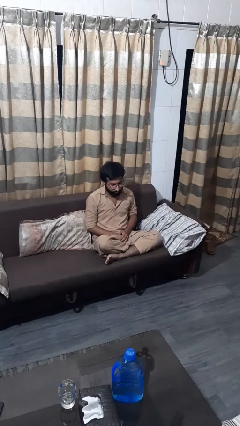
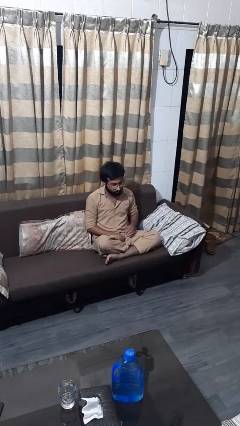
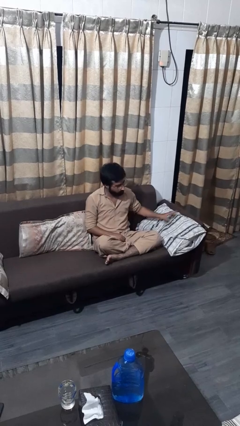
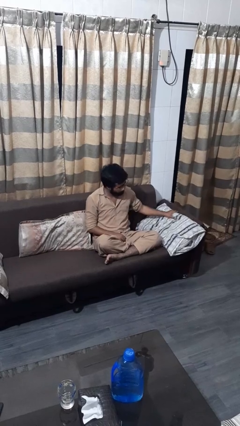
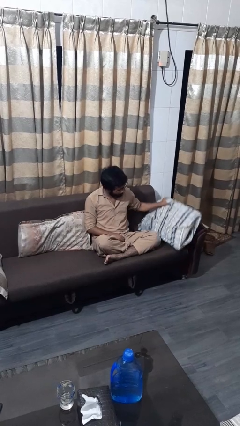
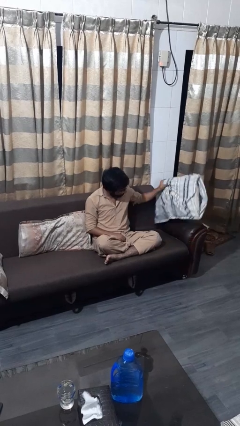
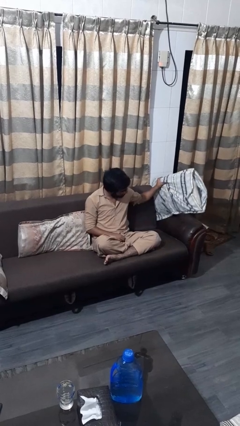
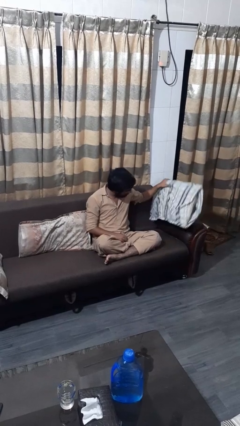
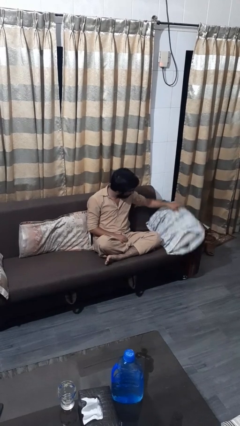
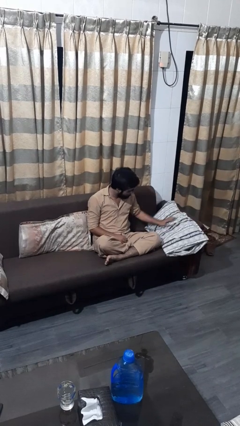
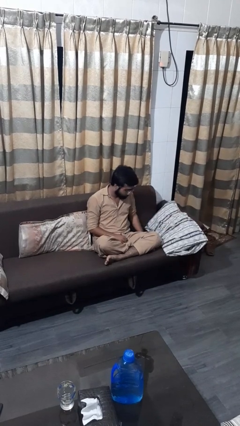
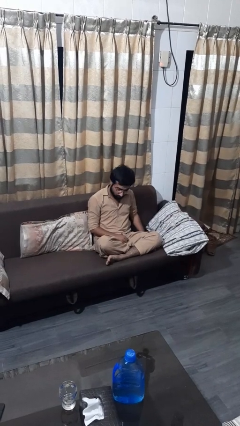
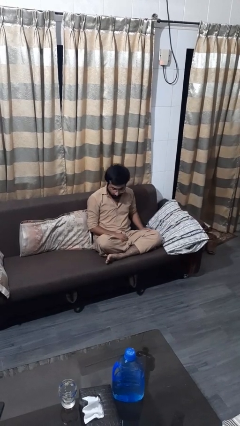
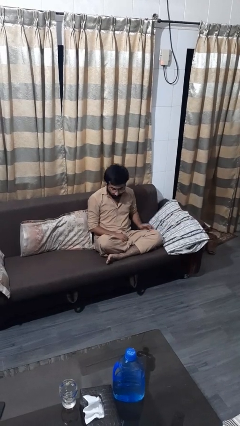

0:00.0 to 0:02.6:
person searches in couch

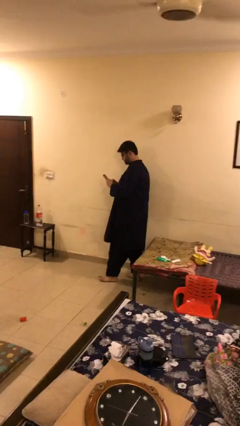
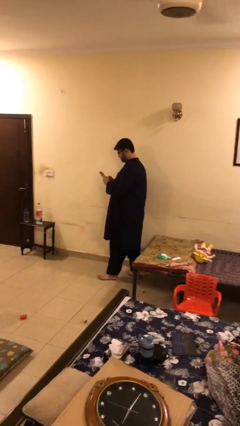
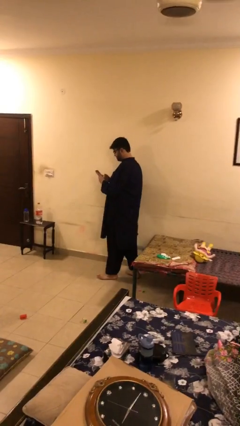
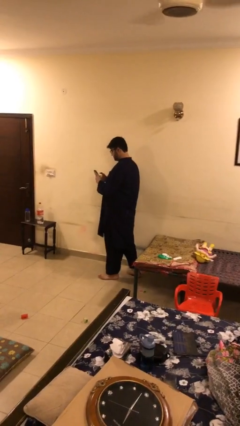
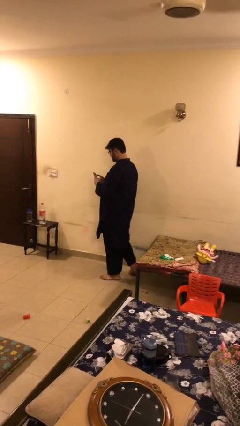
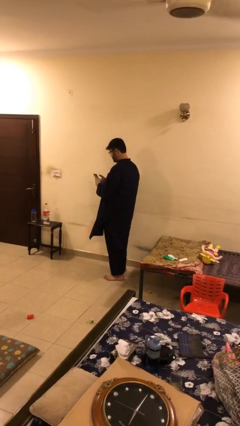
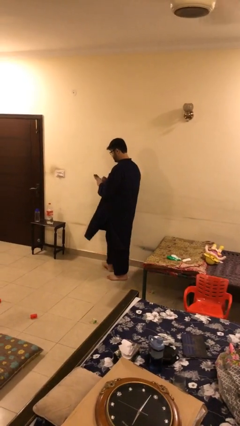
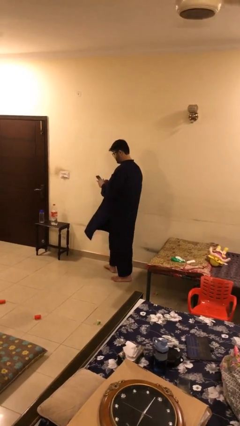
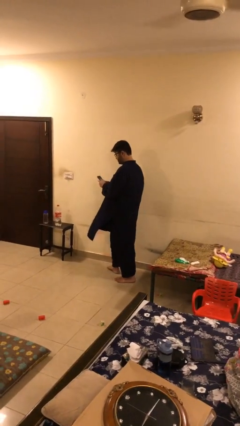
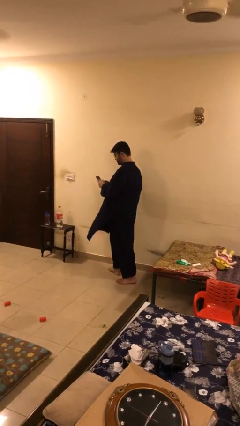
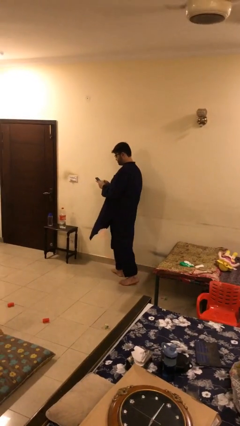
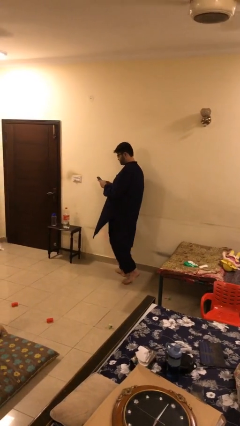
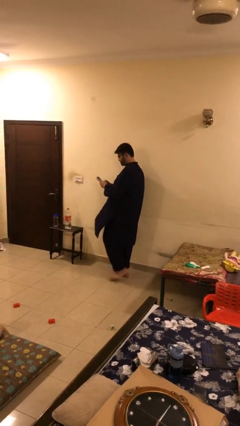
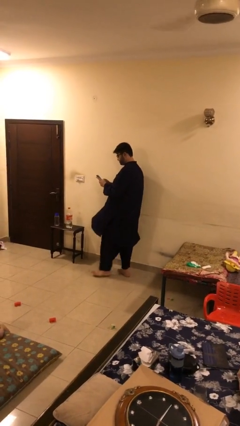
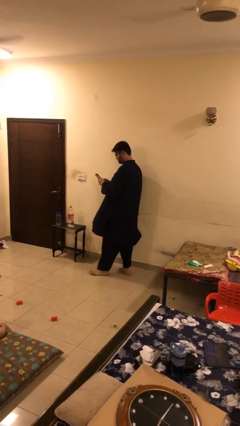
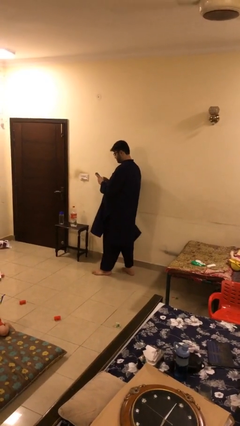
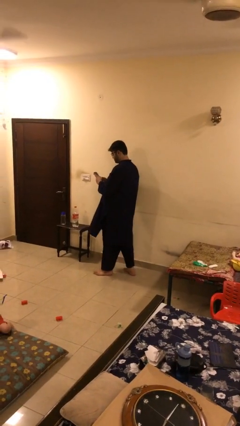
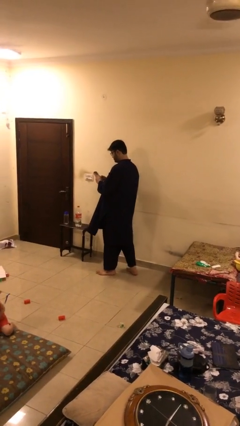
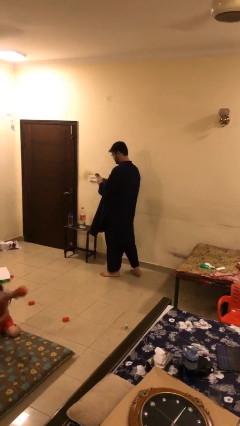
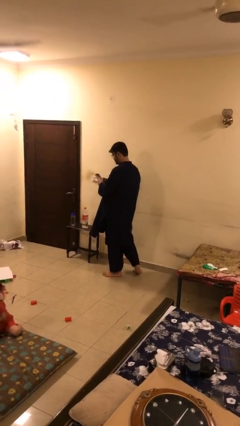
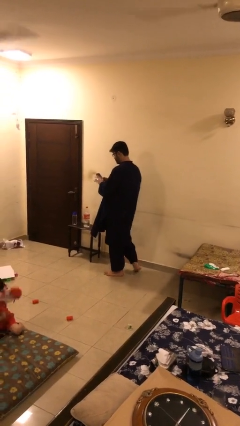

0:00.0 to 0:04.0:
person texts on phone

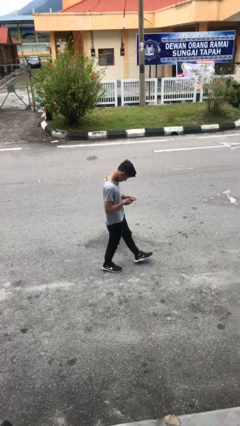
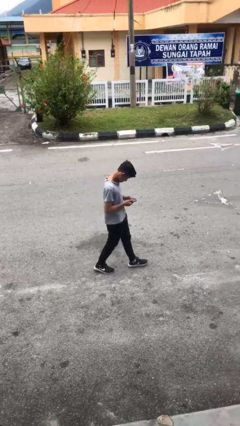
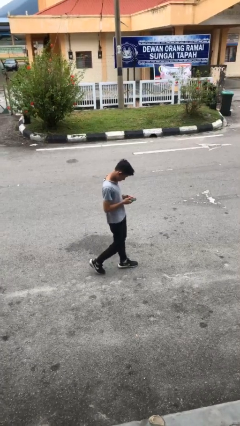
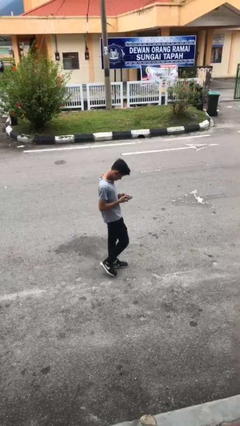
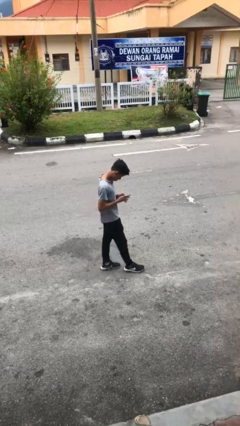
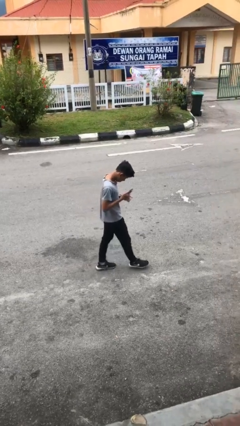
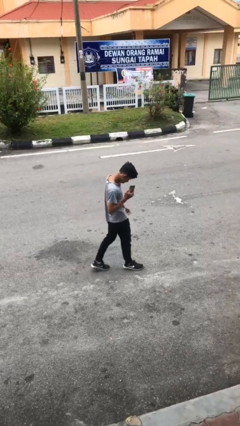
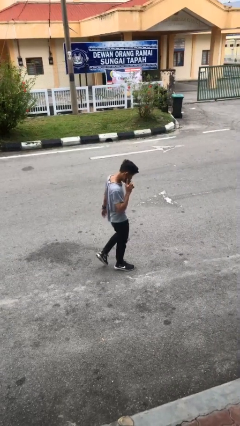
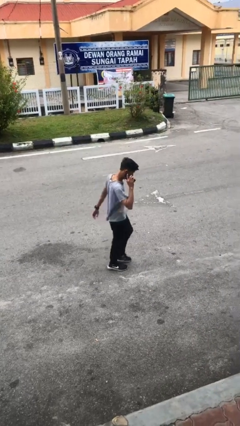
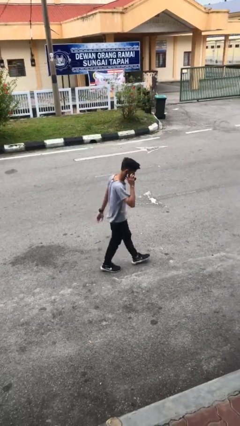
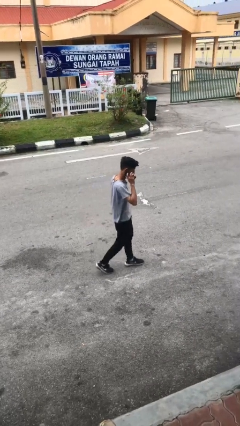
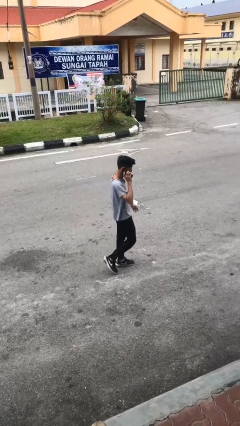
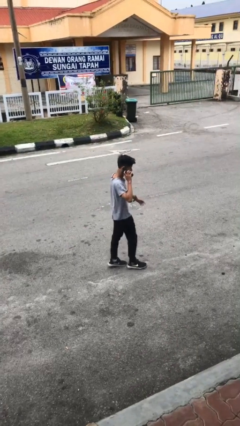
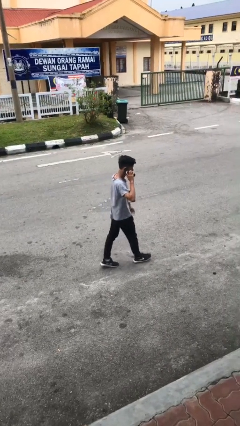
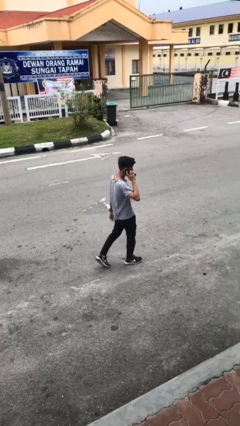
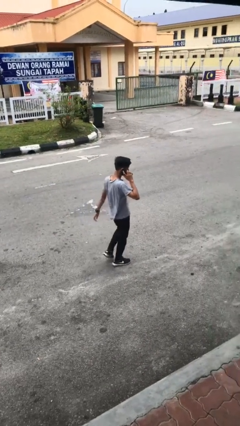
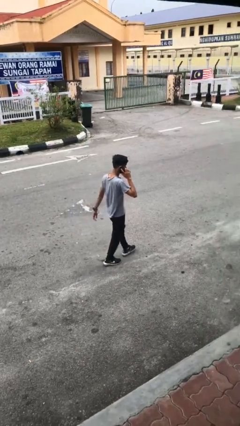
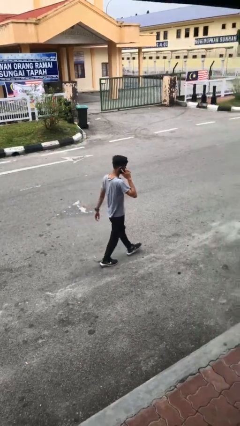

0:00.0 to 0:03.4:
person talks on phone

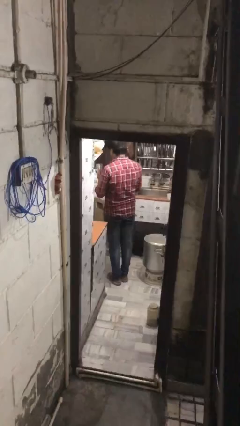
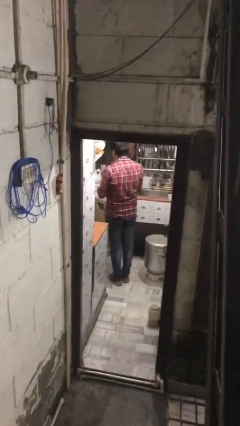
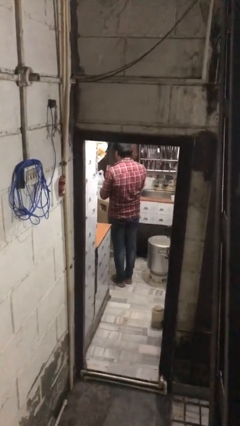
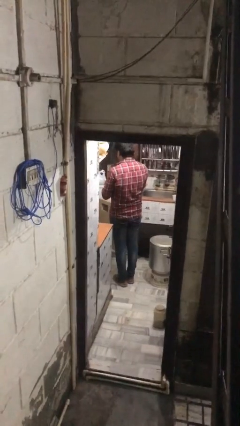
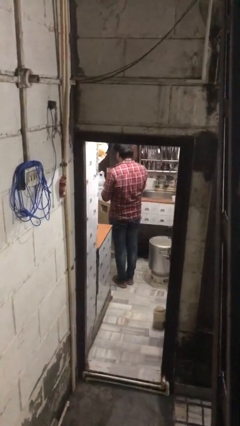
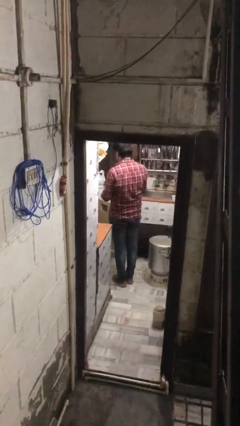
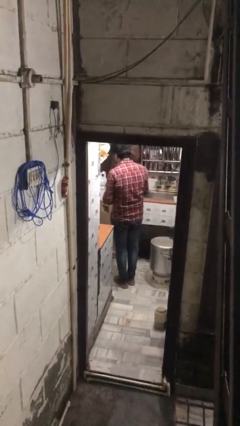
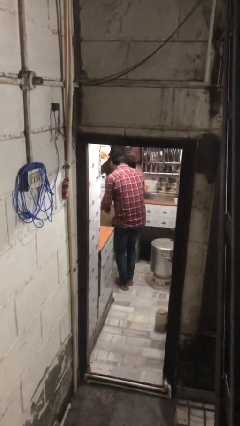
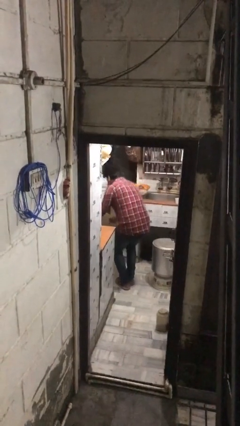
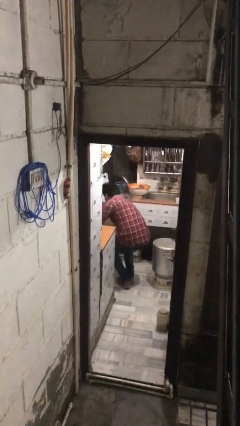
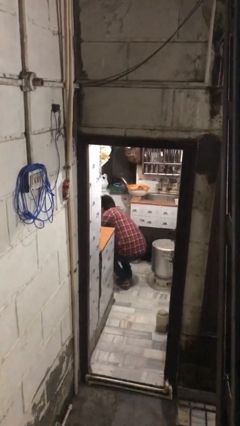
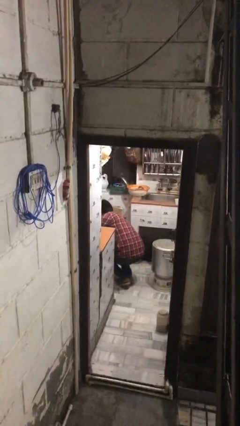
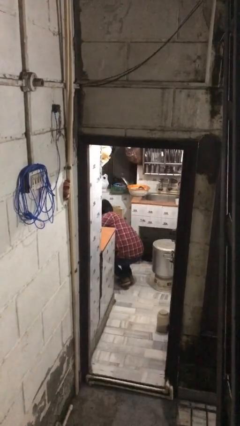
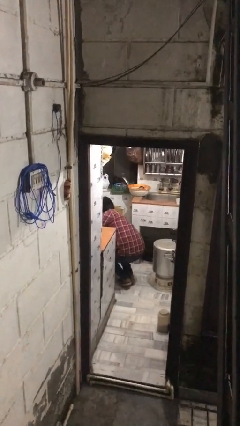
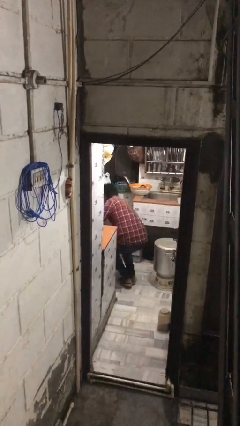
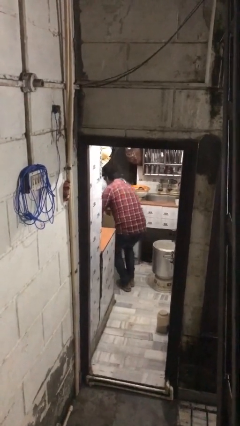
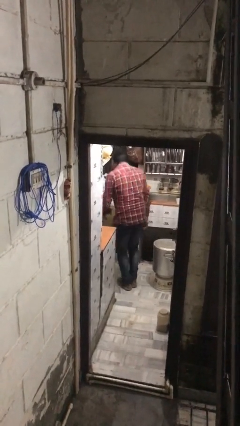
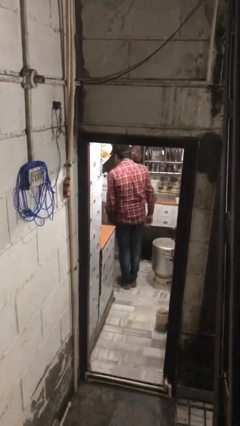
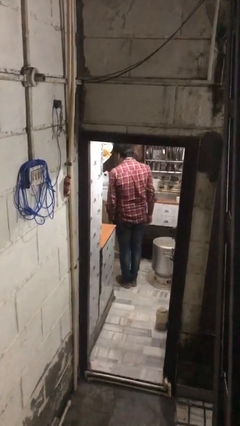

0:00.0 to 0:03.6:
person puts object into kitchen drawer

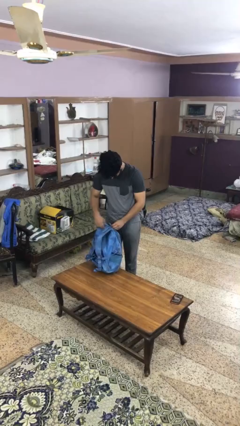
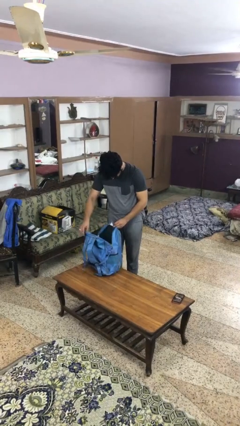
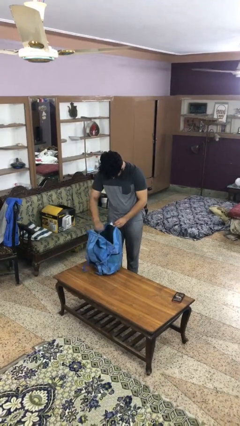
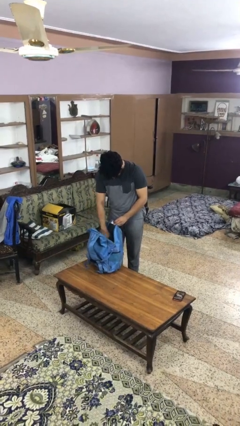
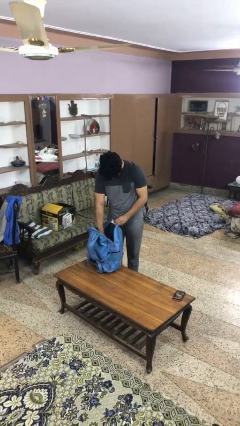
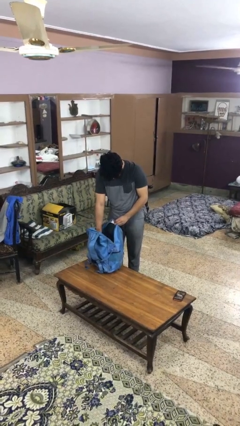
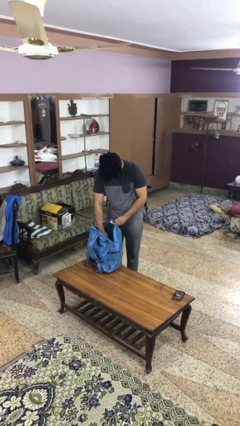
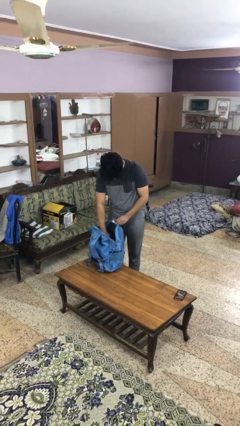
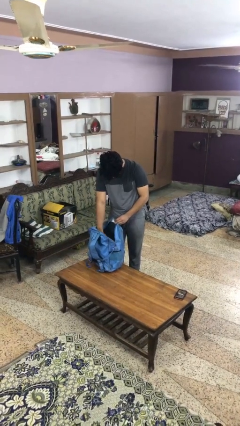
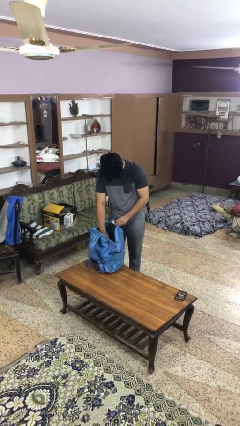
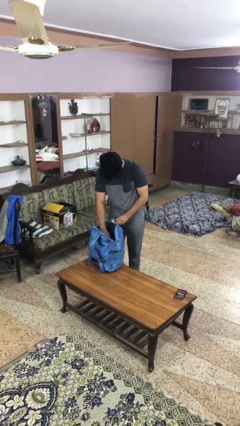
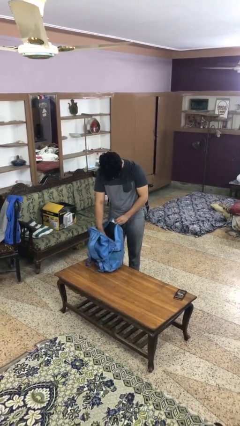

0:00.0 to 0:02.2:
person searches in bag

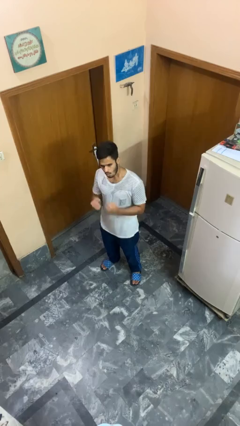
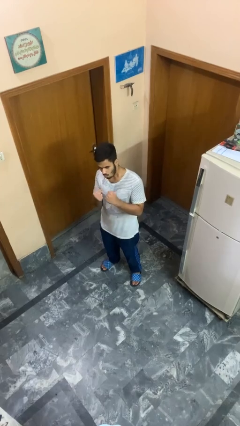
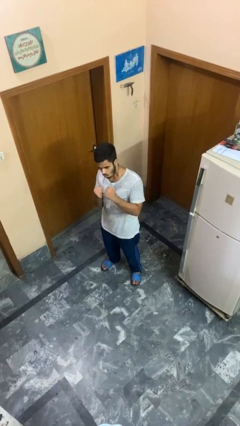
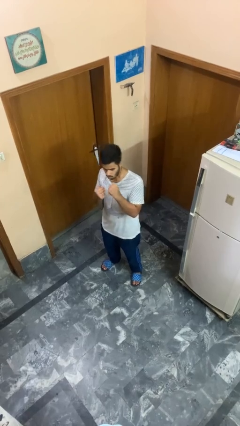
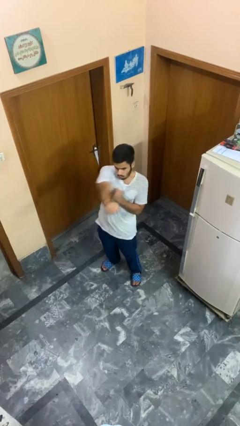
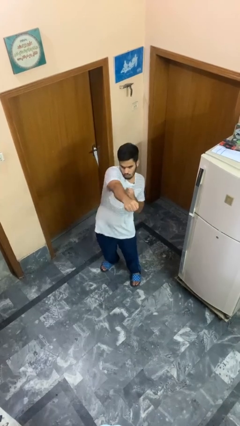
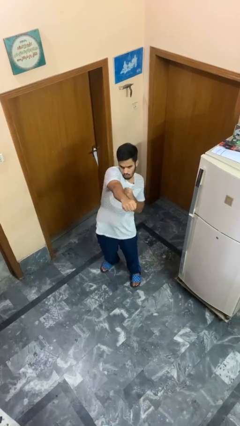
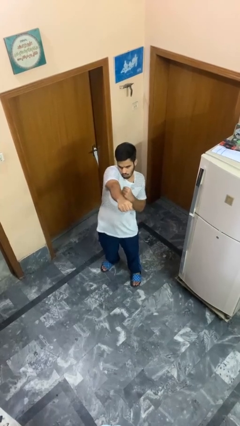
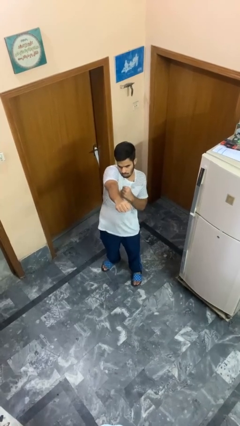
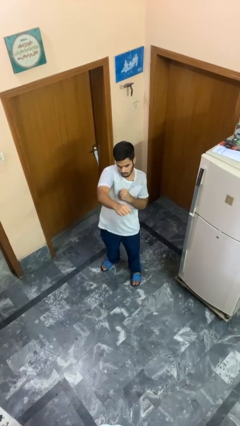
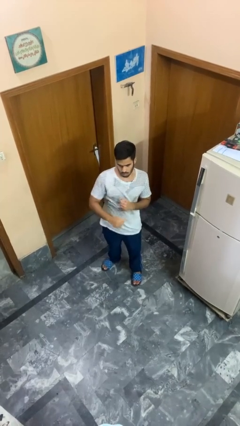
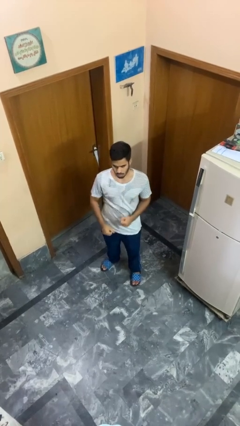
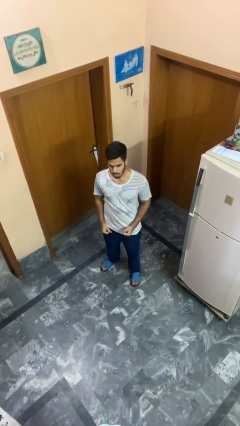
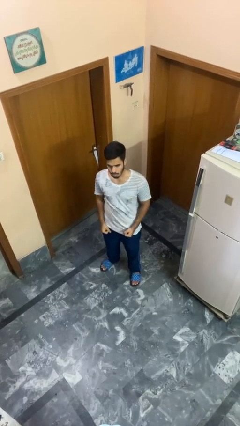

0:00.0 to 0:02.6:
person punches
